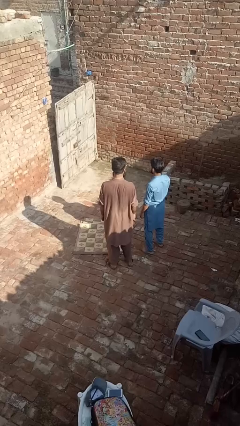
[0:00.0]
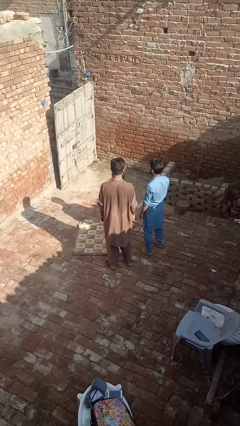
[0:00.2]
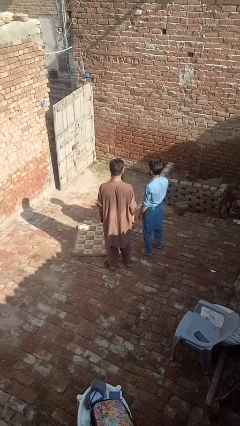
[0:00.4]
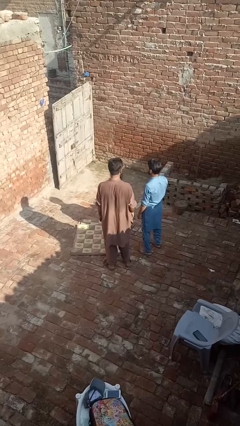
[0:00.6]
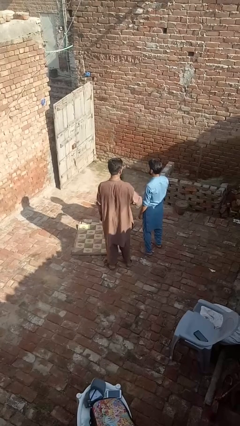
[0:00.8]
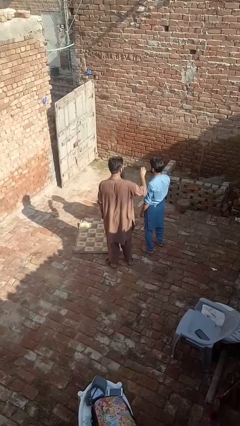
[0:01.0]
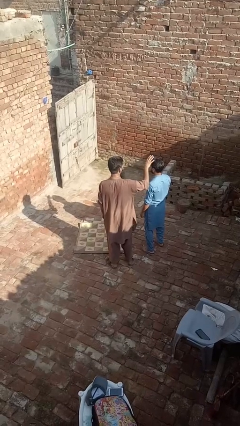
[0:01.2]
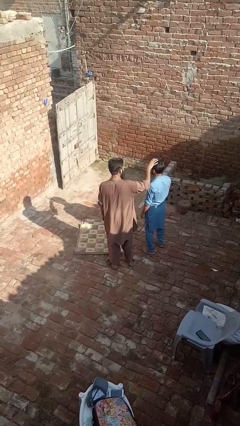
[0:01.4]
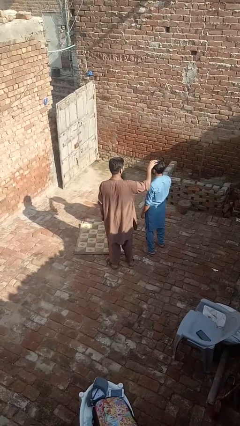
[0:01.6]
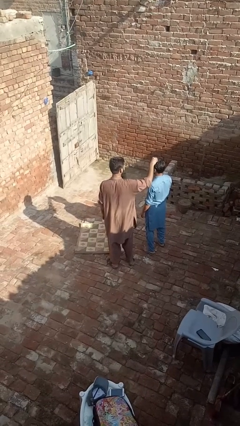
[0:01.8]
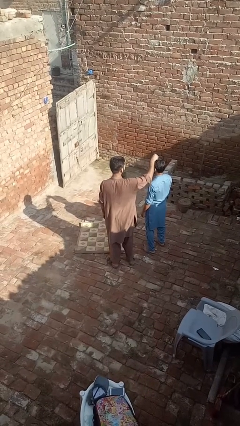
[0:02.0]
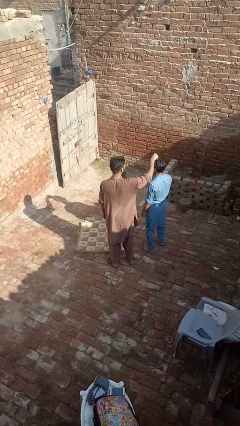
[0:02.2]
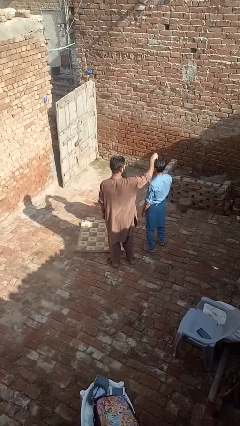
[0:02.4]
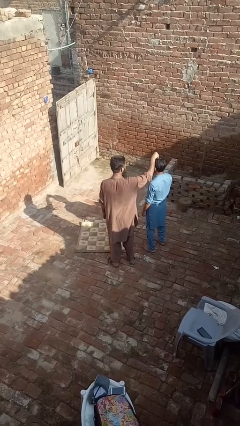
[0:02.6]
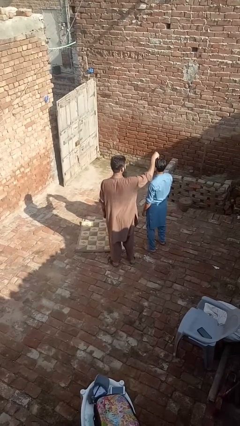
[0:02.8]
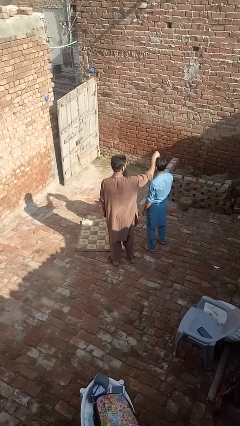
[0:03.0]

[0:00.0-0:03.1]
person grabs person by hair

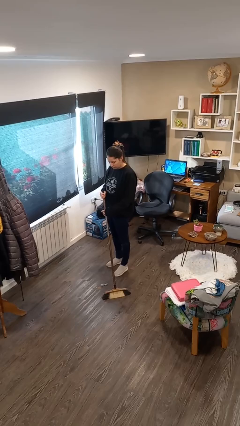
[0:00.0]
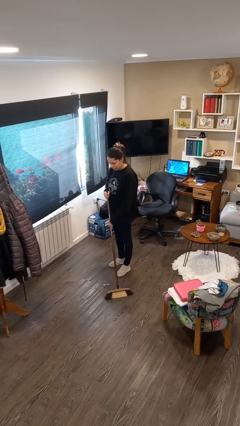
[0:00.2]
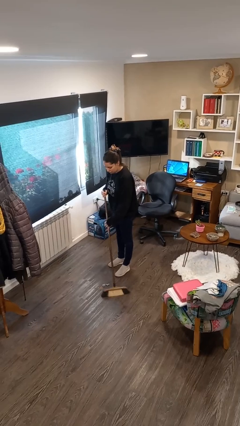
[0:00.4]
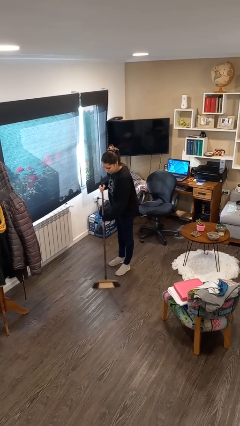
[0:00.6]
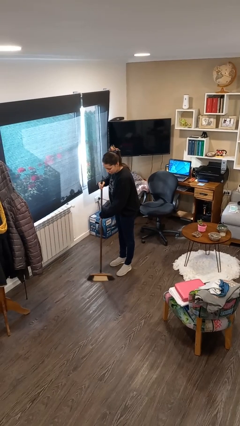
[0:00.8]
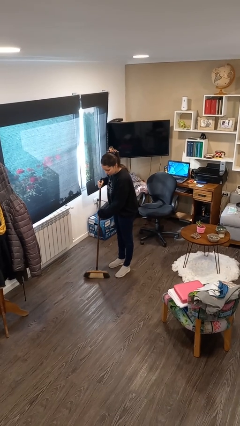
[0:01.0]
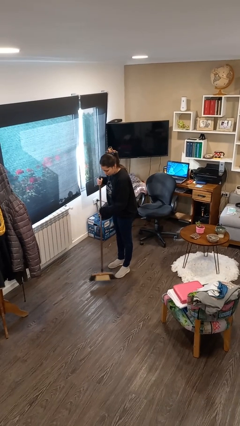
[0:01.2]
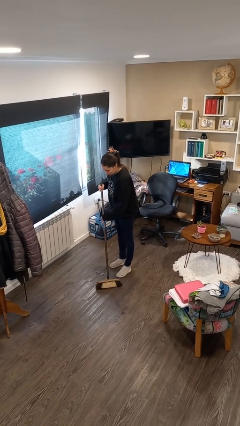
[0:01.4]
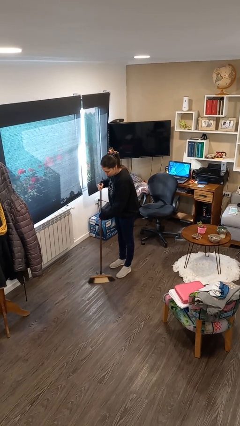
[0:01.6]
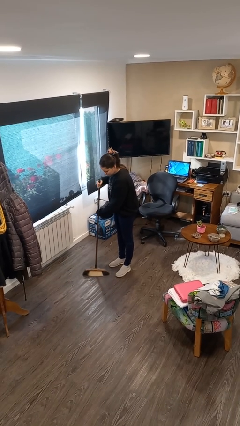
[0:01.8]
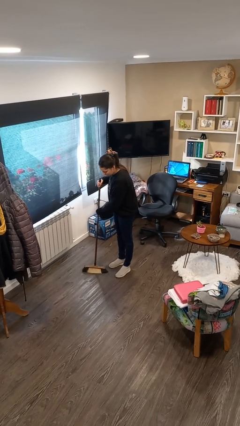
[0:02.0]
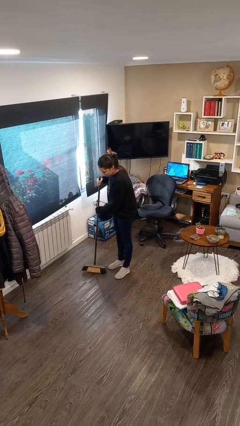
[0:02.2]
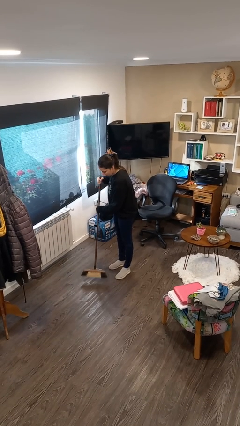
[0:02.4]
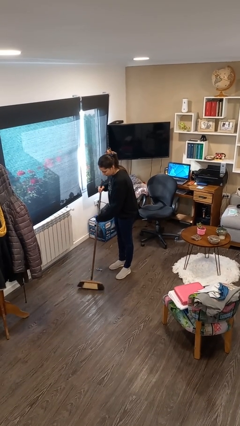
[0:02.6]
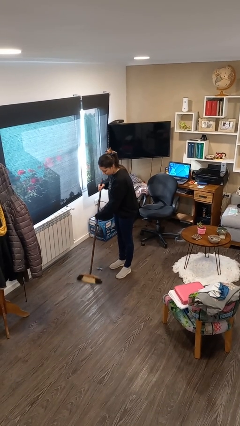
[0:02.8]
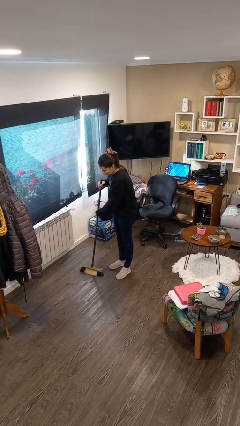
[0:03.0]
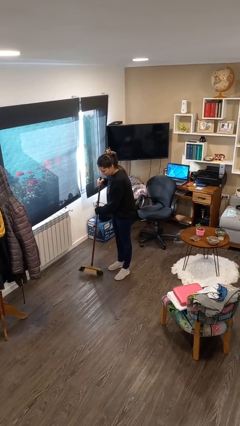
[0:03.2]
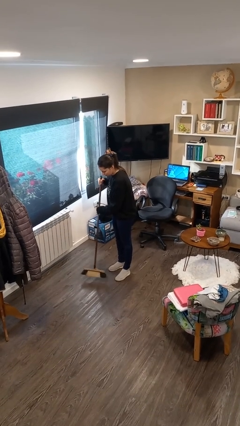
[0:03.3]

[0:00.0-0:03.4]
person sweeps floor

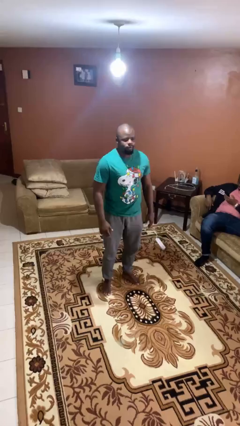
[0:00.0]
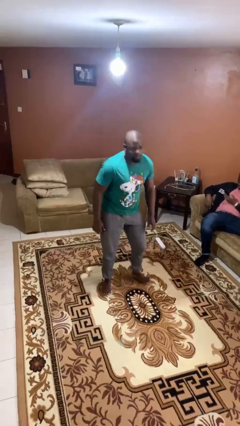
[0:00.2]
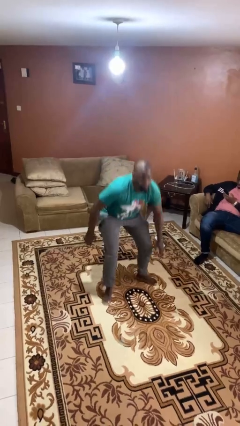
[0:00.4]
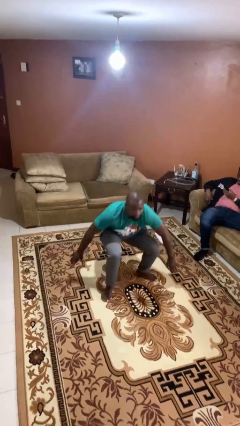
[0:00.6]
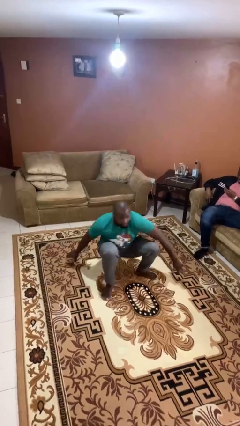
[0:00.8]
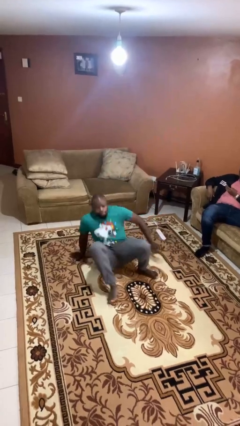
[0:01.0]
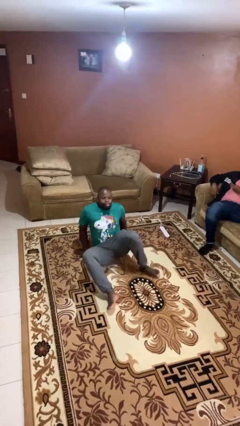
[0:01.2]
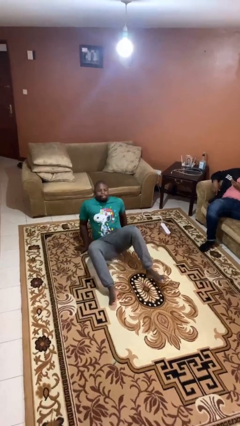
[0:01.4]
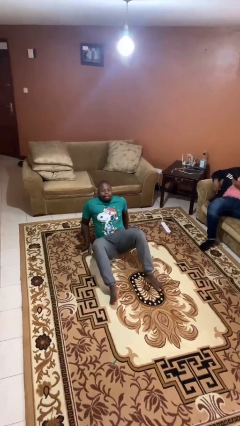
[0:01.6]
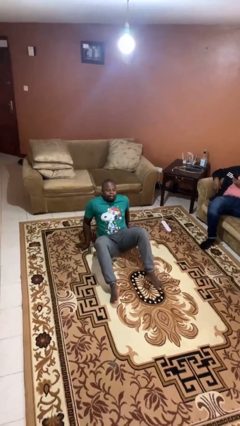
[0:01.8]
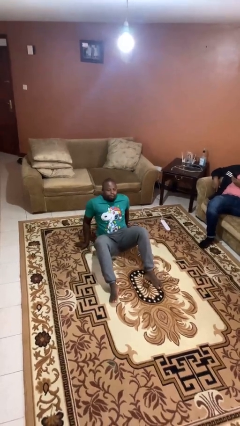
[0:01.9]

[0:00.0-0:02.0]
person sits down

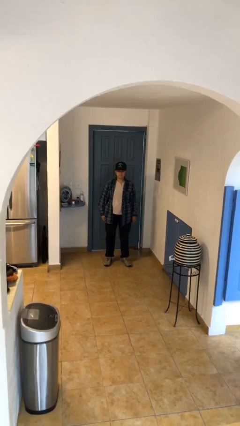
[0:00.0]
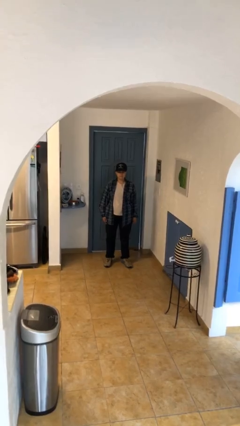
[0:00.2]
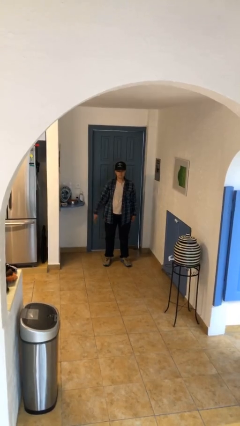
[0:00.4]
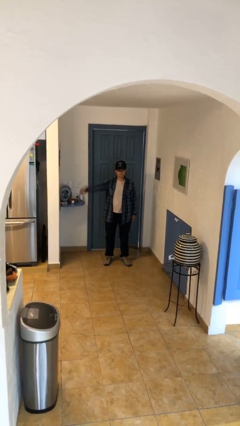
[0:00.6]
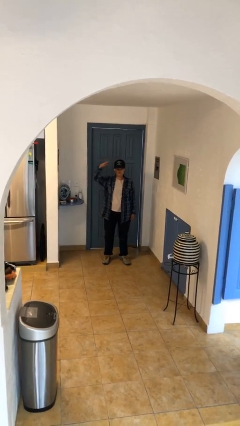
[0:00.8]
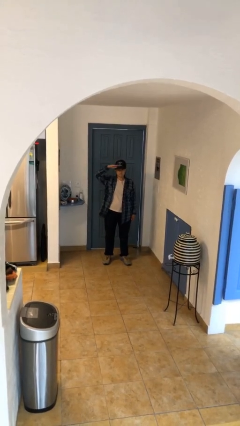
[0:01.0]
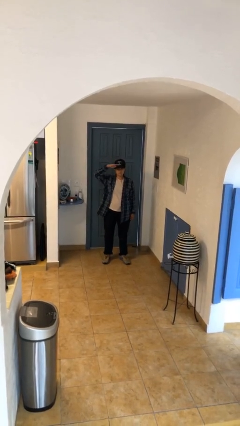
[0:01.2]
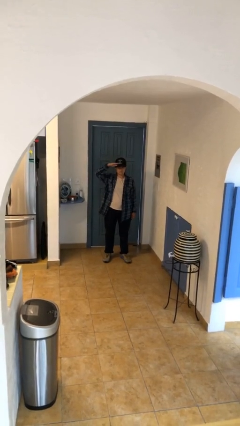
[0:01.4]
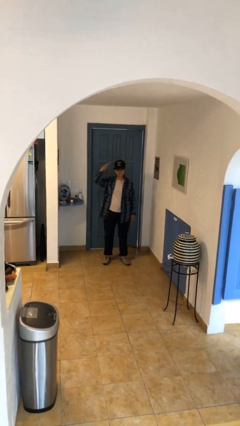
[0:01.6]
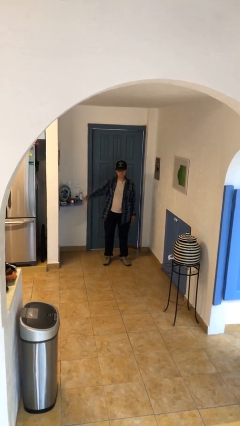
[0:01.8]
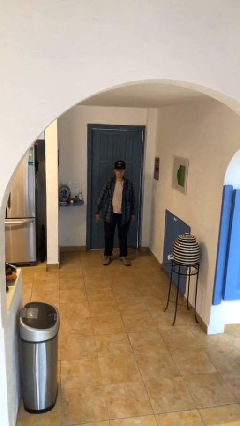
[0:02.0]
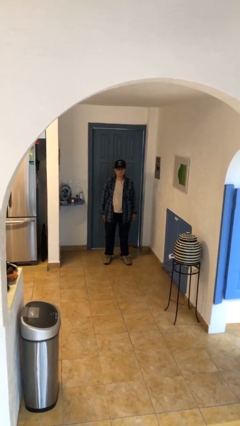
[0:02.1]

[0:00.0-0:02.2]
person salutes

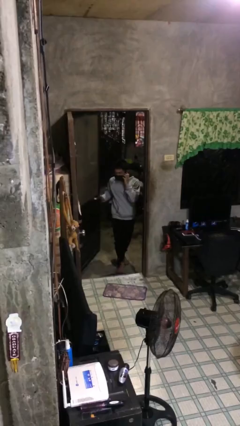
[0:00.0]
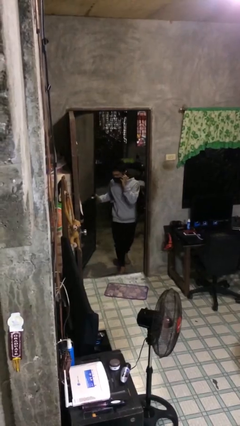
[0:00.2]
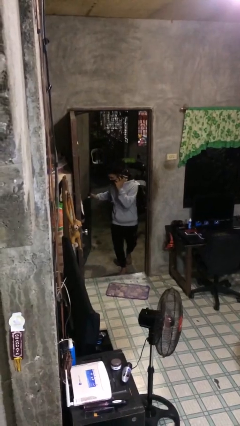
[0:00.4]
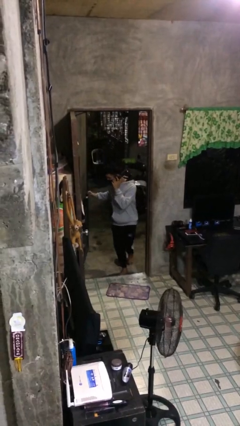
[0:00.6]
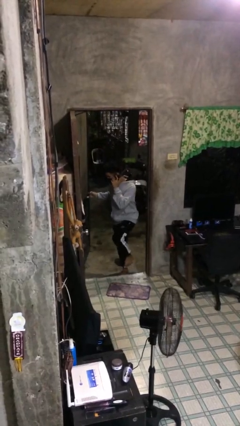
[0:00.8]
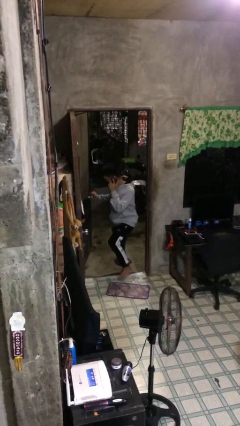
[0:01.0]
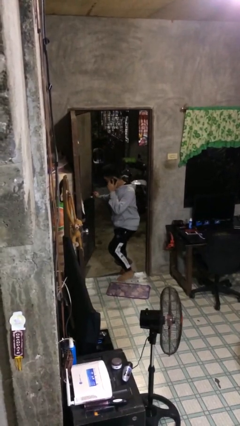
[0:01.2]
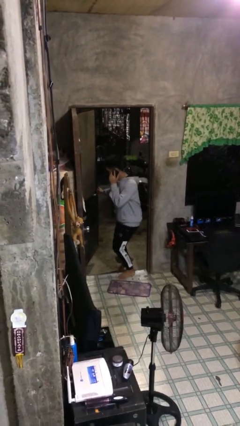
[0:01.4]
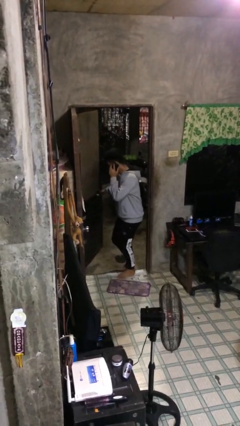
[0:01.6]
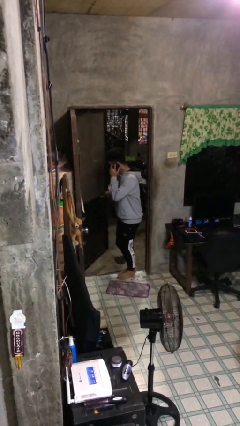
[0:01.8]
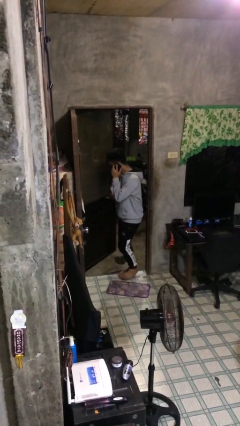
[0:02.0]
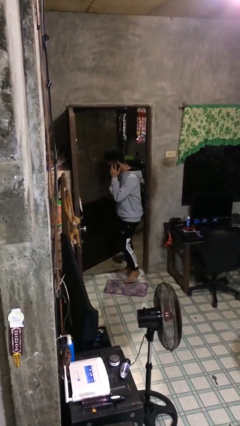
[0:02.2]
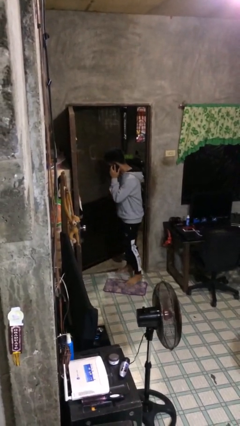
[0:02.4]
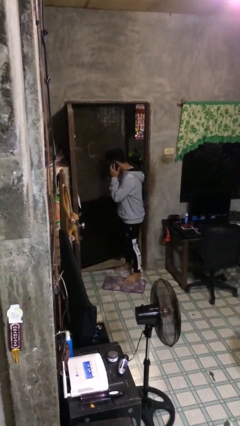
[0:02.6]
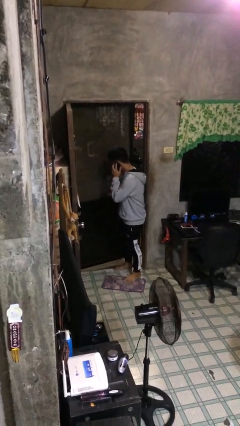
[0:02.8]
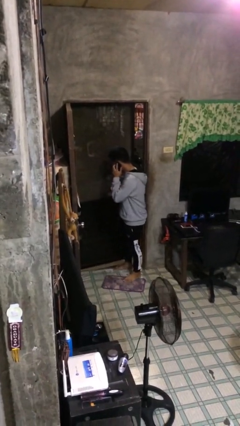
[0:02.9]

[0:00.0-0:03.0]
person enters scene through structure

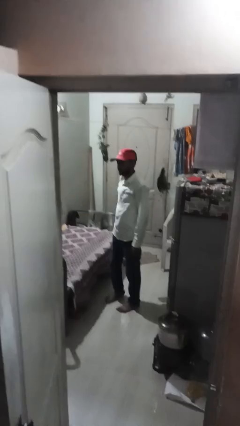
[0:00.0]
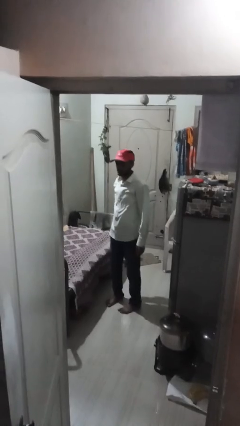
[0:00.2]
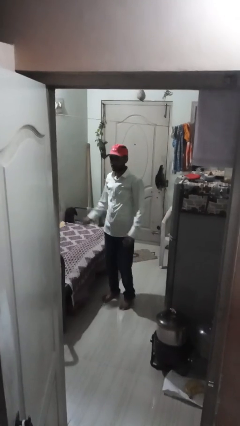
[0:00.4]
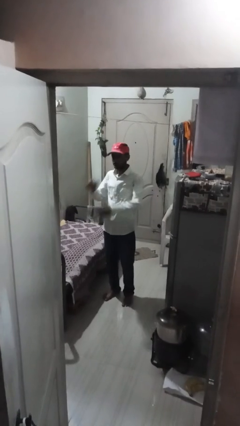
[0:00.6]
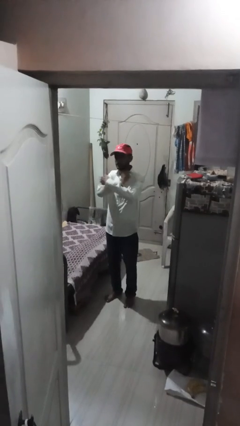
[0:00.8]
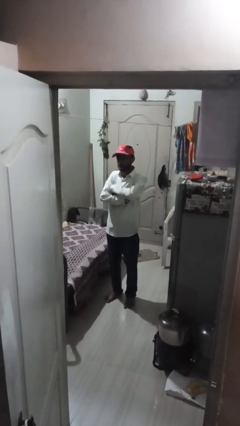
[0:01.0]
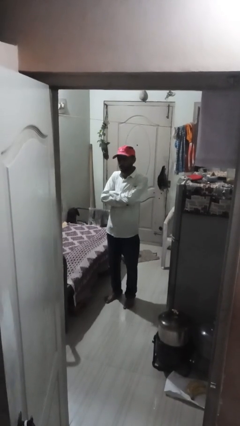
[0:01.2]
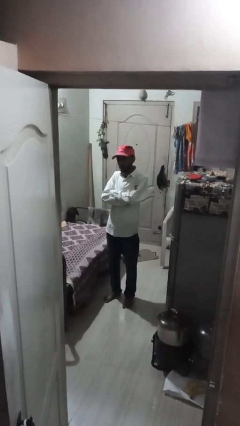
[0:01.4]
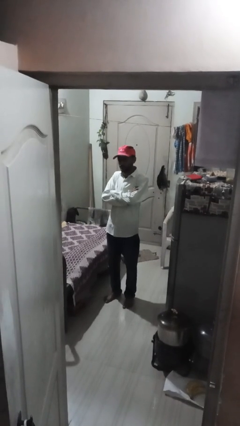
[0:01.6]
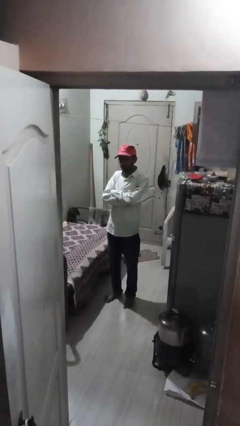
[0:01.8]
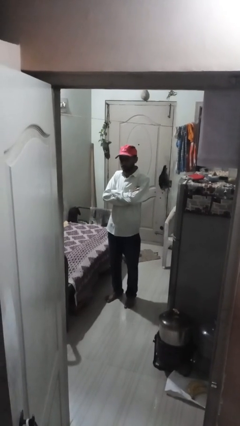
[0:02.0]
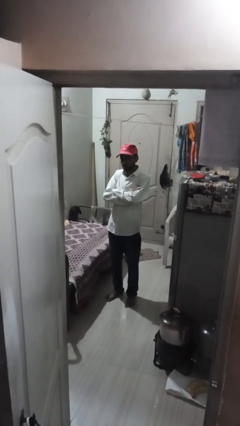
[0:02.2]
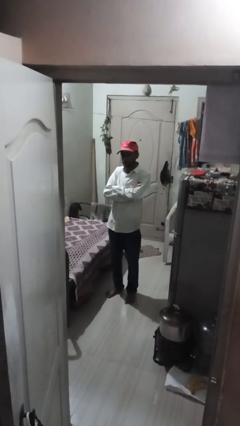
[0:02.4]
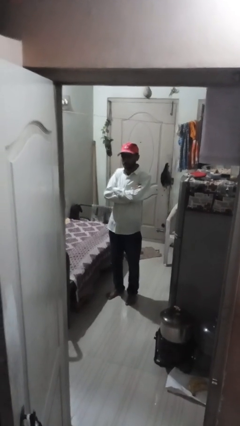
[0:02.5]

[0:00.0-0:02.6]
person crosses arms

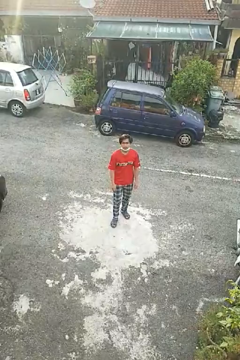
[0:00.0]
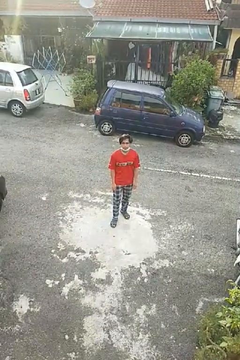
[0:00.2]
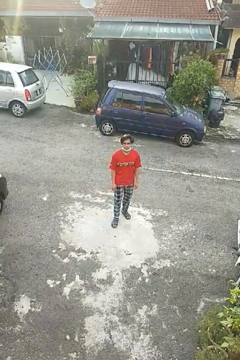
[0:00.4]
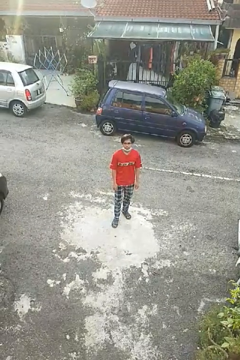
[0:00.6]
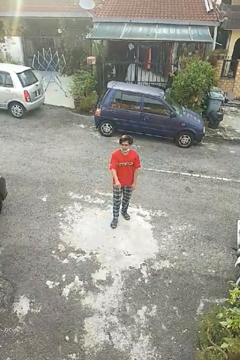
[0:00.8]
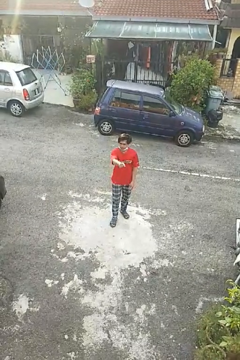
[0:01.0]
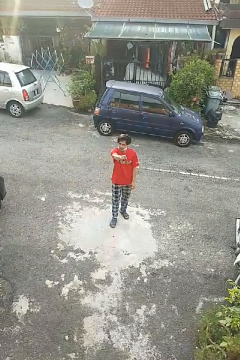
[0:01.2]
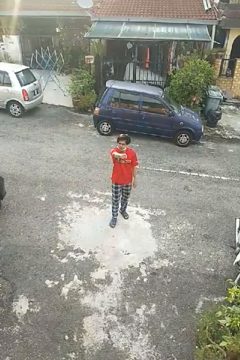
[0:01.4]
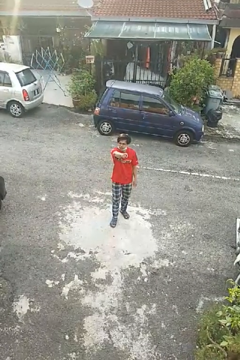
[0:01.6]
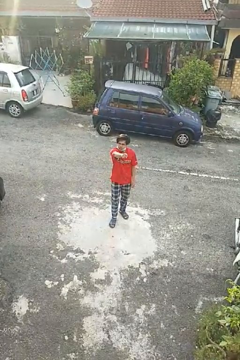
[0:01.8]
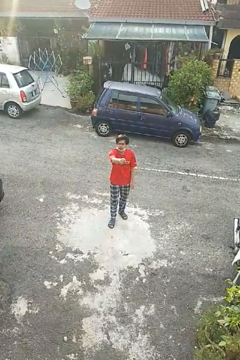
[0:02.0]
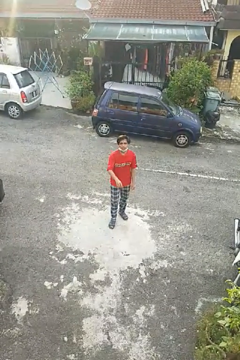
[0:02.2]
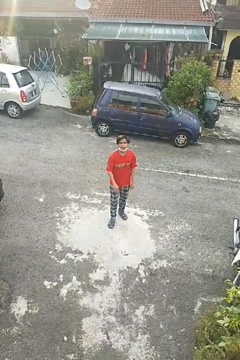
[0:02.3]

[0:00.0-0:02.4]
person points at person
